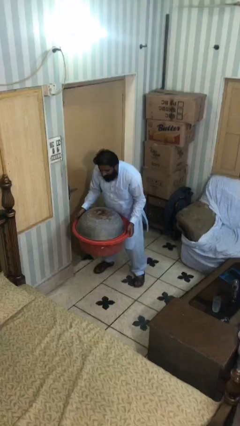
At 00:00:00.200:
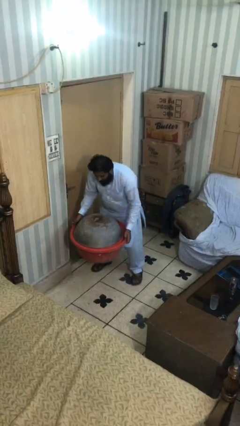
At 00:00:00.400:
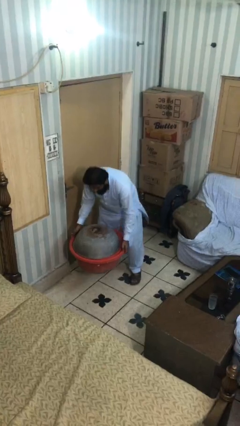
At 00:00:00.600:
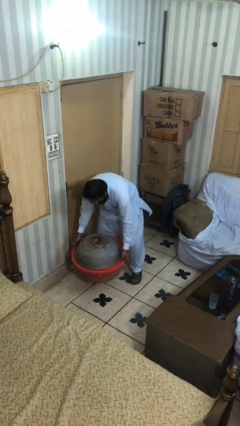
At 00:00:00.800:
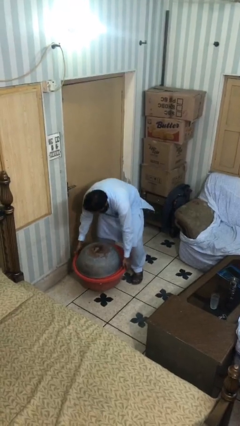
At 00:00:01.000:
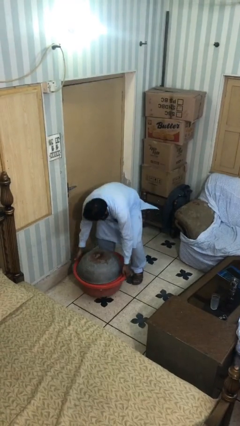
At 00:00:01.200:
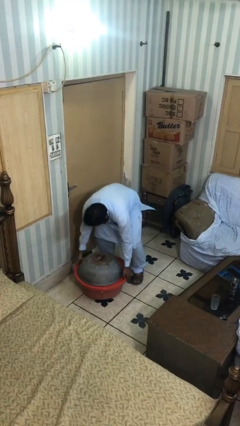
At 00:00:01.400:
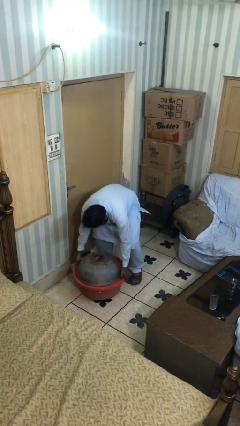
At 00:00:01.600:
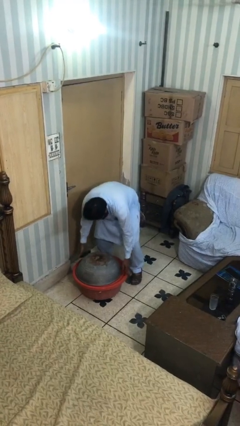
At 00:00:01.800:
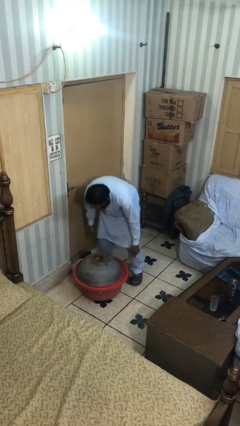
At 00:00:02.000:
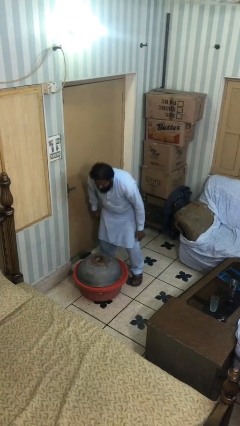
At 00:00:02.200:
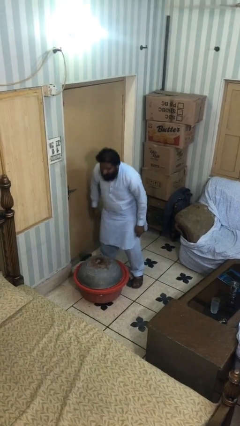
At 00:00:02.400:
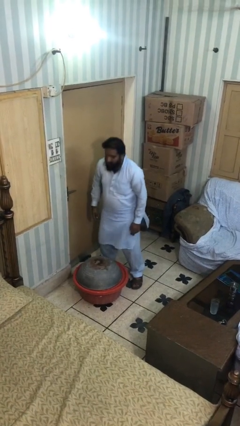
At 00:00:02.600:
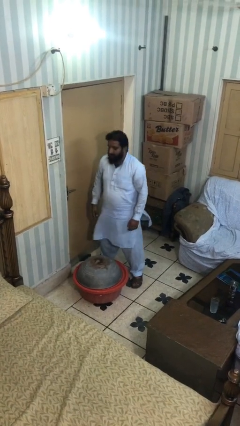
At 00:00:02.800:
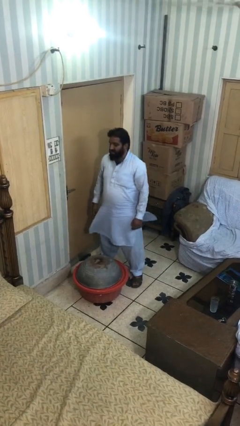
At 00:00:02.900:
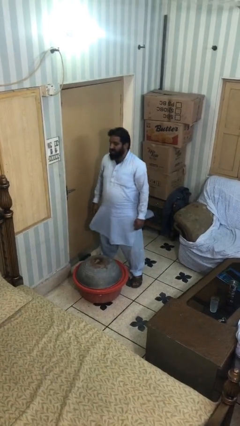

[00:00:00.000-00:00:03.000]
person puts down object on floor

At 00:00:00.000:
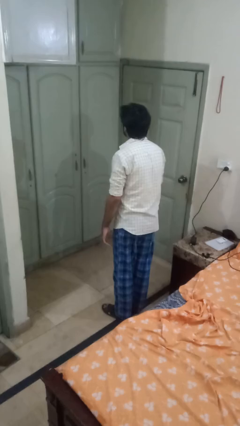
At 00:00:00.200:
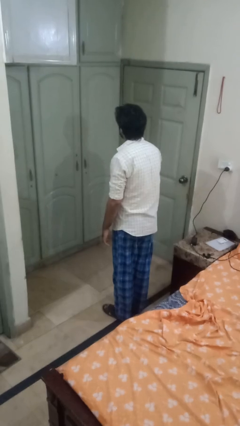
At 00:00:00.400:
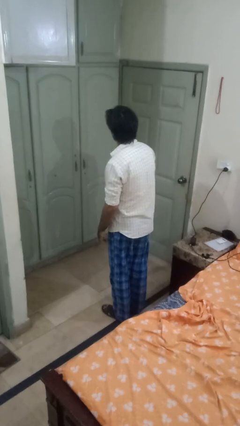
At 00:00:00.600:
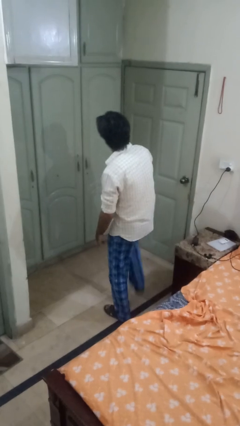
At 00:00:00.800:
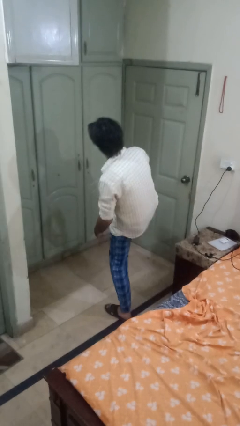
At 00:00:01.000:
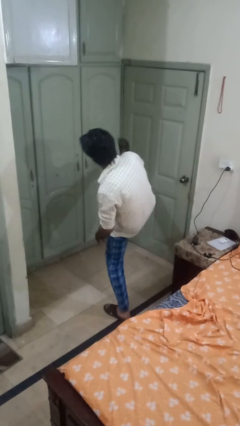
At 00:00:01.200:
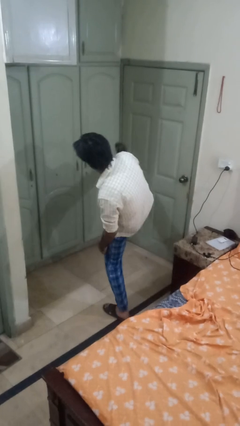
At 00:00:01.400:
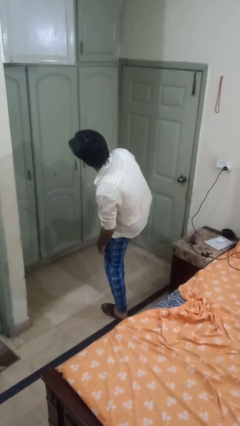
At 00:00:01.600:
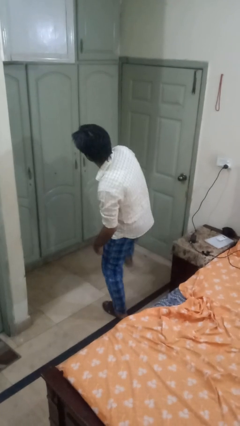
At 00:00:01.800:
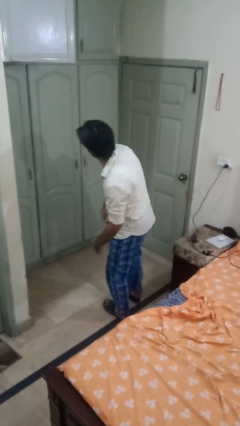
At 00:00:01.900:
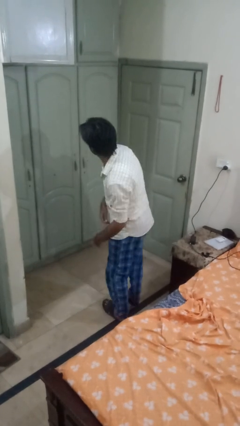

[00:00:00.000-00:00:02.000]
person karate kicks

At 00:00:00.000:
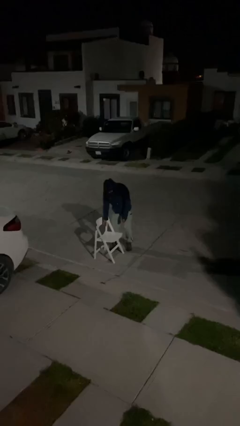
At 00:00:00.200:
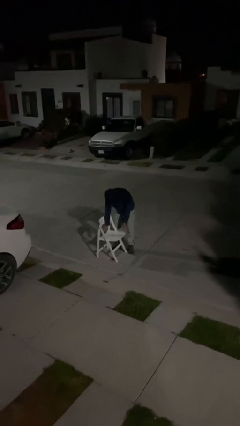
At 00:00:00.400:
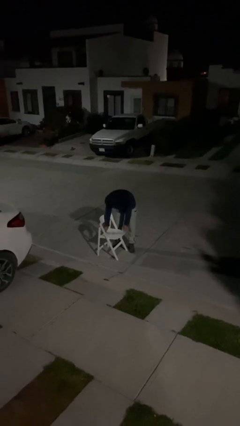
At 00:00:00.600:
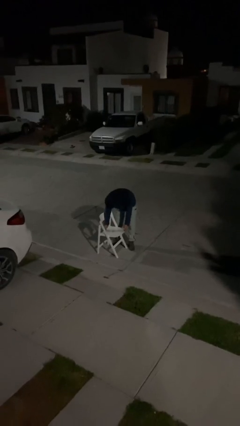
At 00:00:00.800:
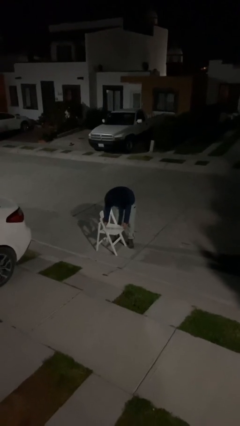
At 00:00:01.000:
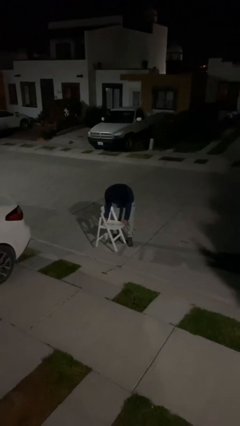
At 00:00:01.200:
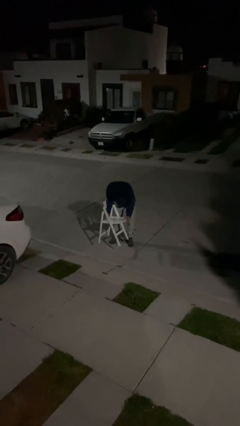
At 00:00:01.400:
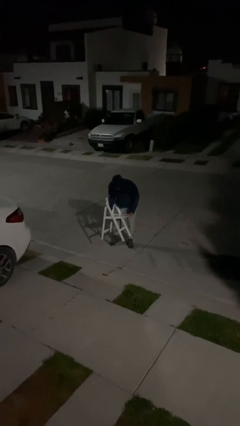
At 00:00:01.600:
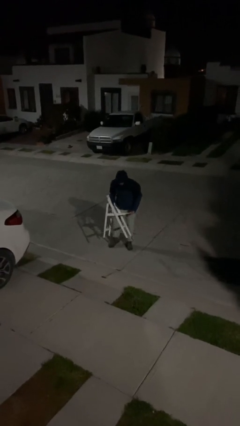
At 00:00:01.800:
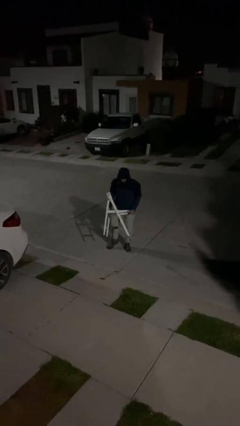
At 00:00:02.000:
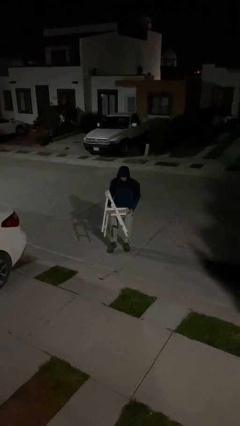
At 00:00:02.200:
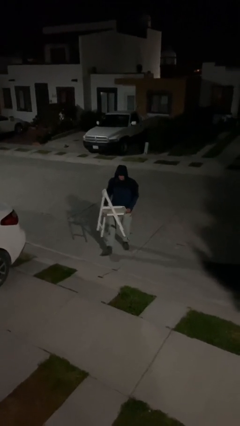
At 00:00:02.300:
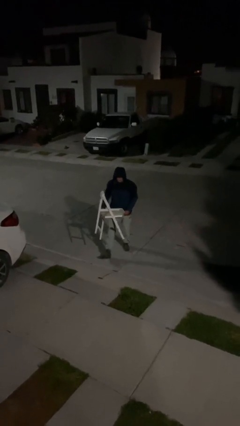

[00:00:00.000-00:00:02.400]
person picks up object from floor

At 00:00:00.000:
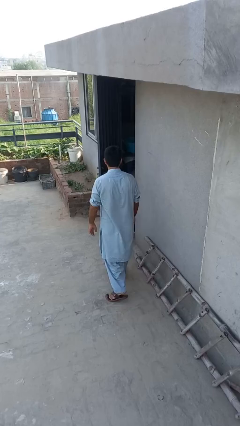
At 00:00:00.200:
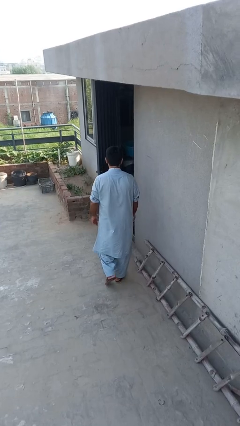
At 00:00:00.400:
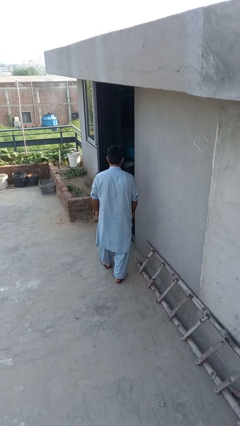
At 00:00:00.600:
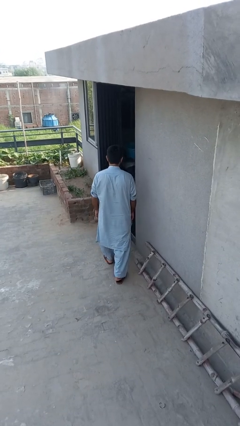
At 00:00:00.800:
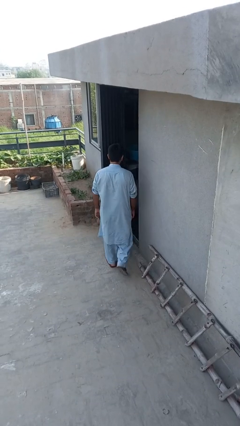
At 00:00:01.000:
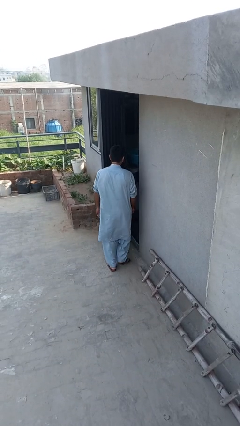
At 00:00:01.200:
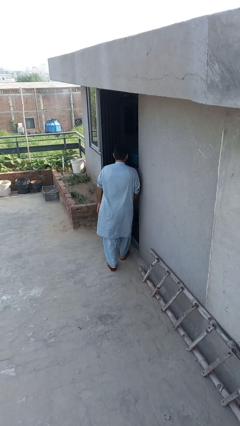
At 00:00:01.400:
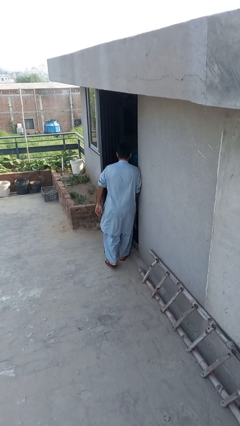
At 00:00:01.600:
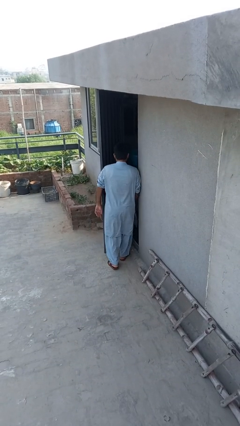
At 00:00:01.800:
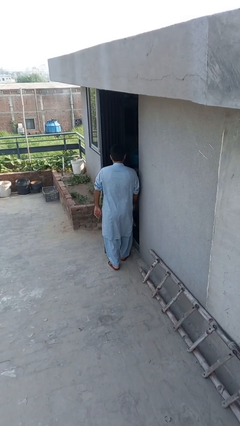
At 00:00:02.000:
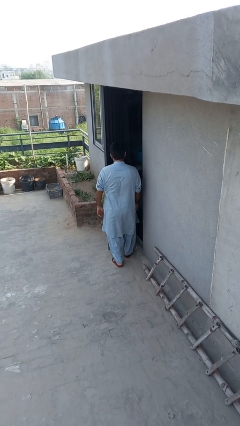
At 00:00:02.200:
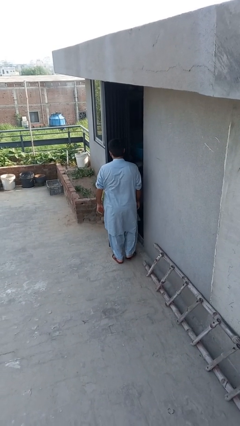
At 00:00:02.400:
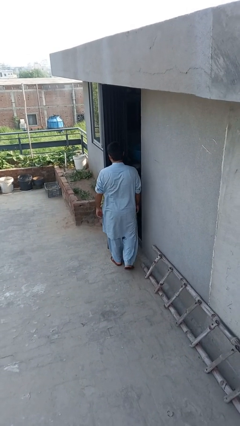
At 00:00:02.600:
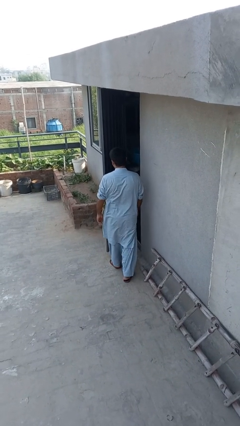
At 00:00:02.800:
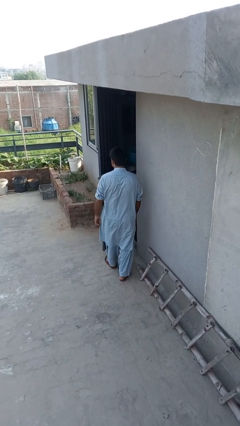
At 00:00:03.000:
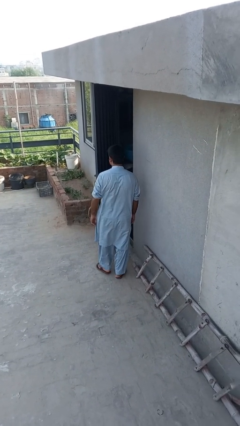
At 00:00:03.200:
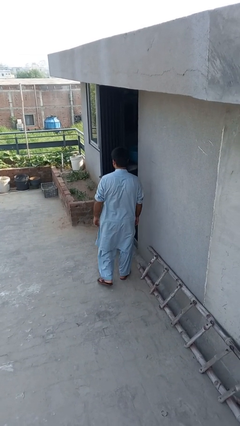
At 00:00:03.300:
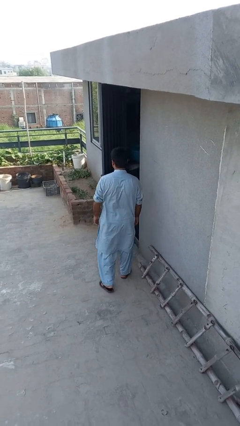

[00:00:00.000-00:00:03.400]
person bumps into wall

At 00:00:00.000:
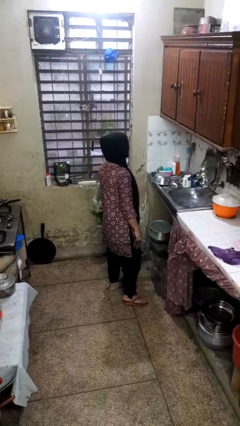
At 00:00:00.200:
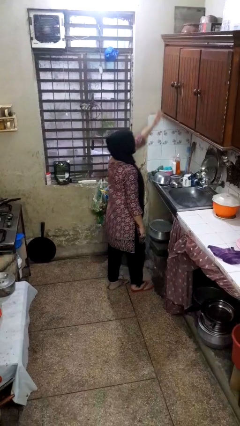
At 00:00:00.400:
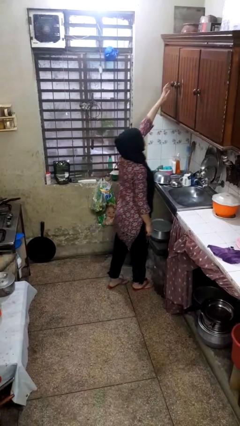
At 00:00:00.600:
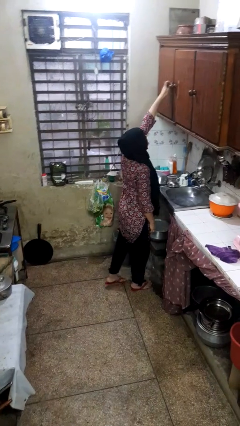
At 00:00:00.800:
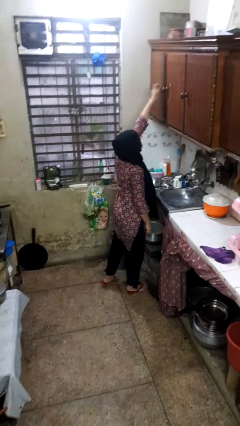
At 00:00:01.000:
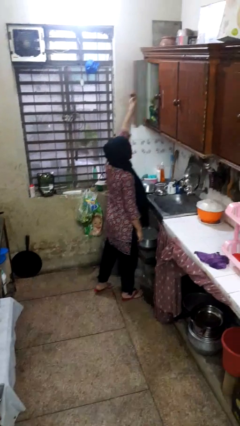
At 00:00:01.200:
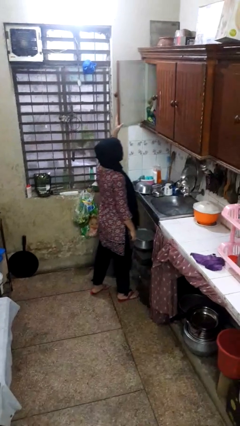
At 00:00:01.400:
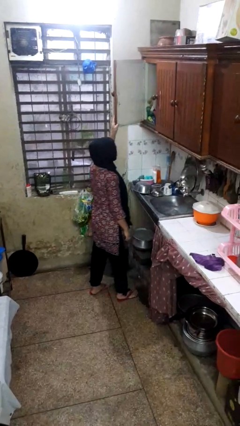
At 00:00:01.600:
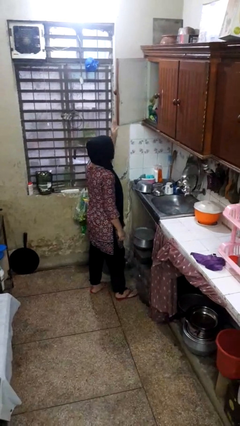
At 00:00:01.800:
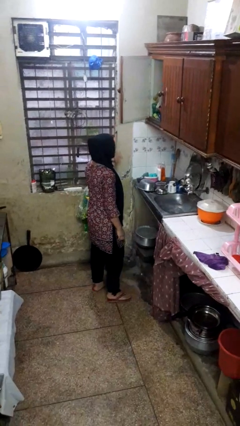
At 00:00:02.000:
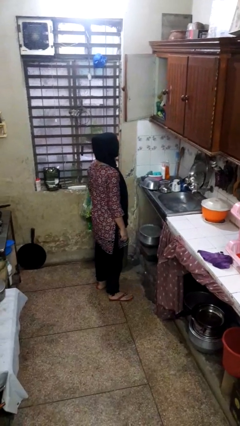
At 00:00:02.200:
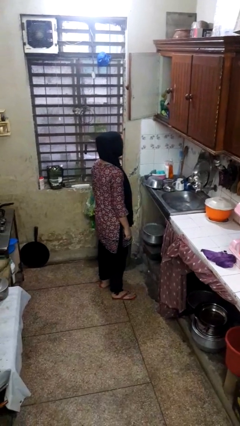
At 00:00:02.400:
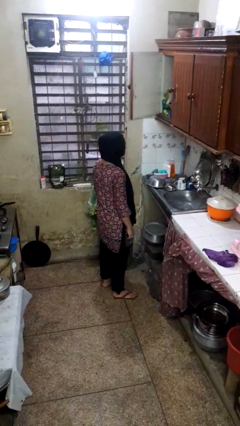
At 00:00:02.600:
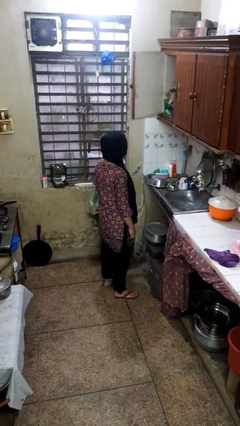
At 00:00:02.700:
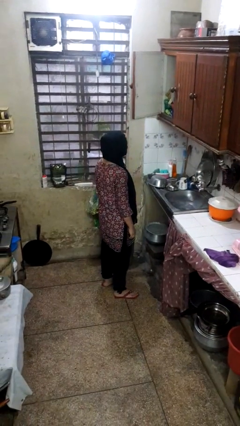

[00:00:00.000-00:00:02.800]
person opens cabinet

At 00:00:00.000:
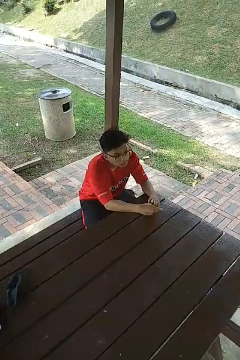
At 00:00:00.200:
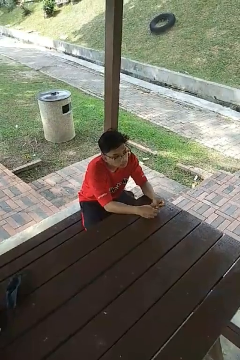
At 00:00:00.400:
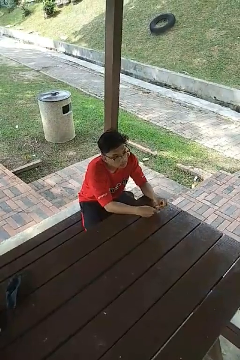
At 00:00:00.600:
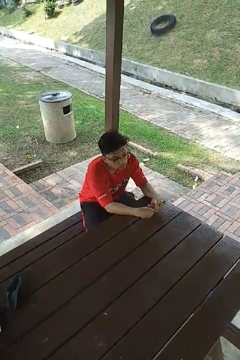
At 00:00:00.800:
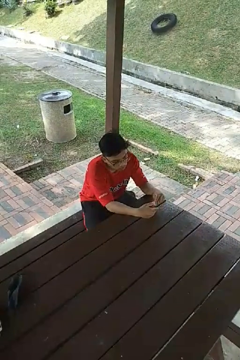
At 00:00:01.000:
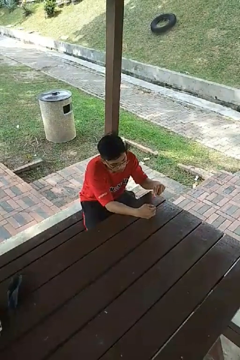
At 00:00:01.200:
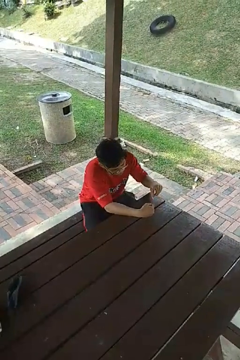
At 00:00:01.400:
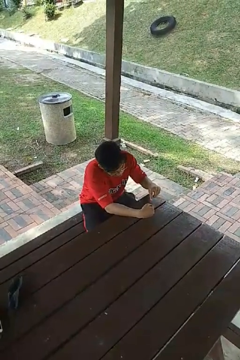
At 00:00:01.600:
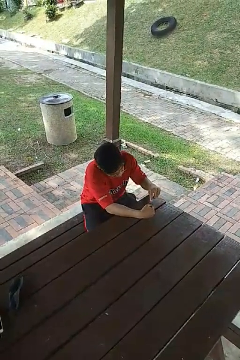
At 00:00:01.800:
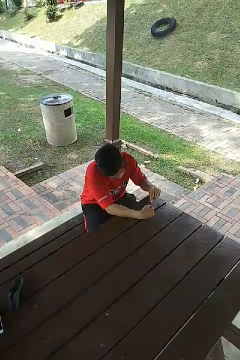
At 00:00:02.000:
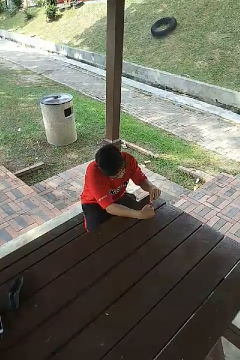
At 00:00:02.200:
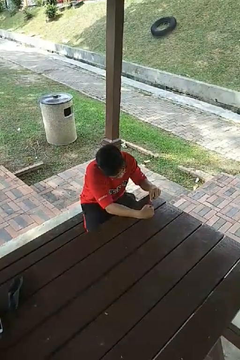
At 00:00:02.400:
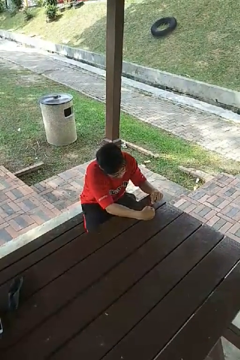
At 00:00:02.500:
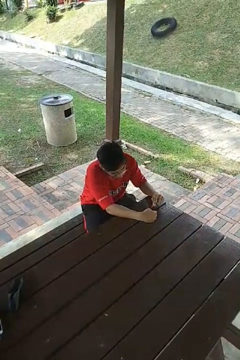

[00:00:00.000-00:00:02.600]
person paints fingernails

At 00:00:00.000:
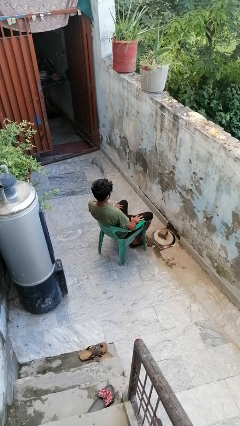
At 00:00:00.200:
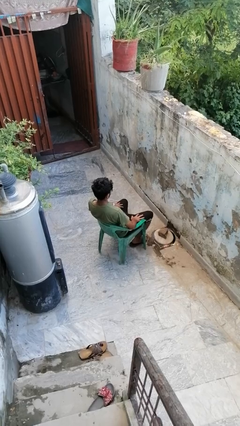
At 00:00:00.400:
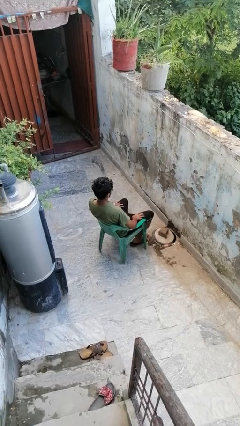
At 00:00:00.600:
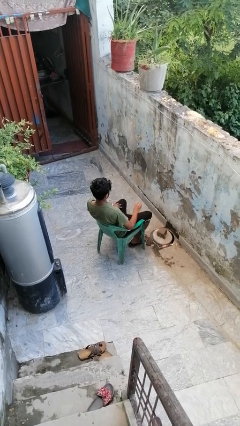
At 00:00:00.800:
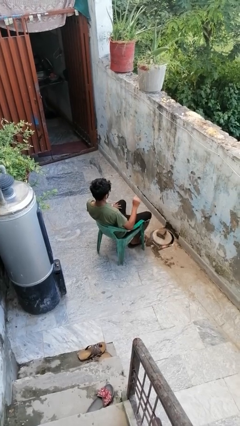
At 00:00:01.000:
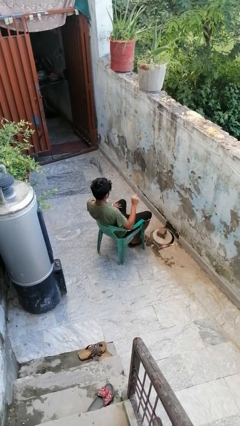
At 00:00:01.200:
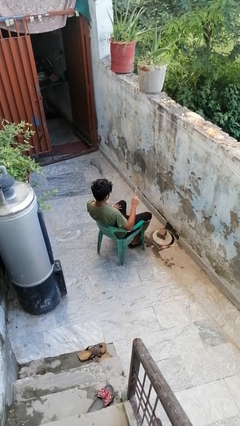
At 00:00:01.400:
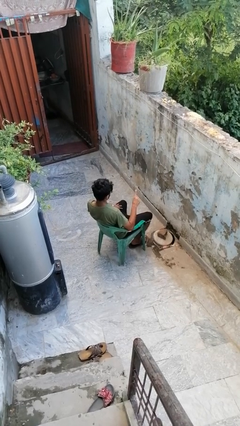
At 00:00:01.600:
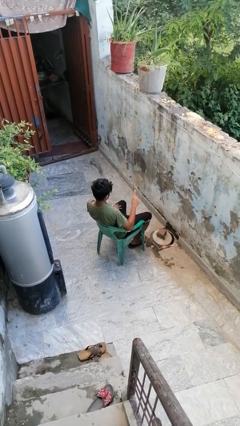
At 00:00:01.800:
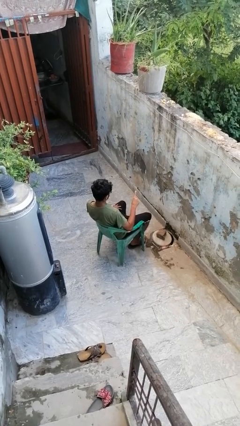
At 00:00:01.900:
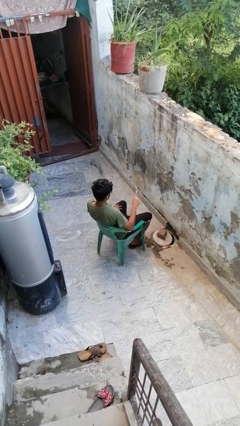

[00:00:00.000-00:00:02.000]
person gestures number one
